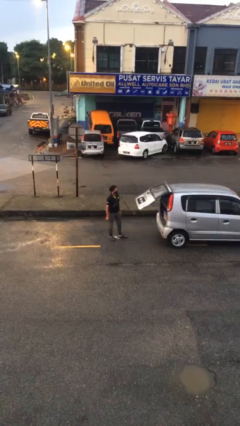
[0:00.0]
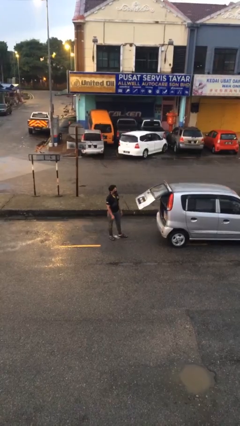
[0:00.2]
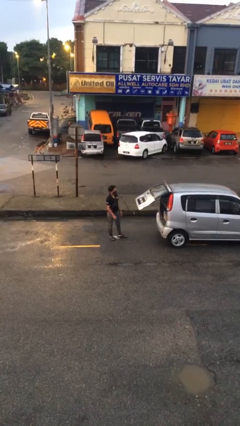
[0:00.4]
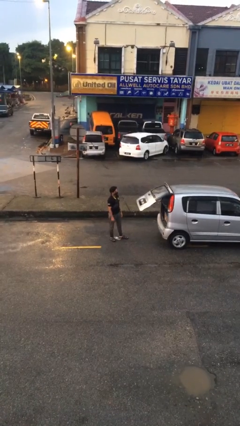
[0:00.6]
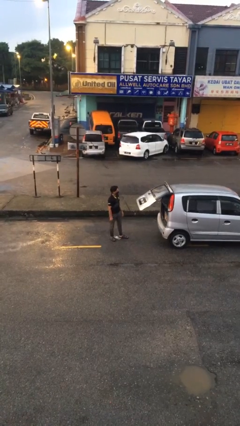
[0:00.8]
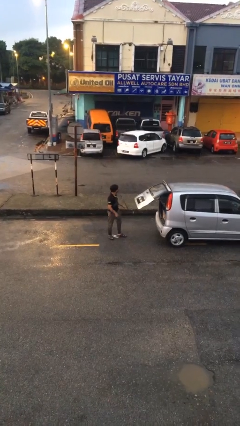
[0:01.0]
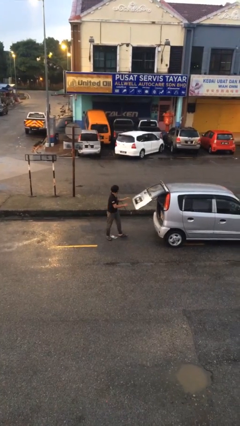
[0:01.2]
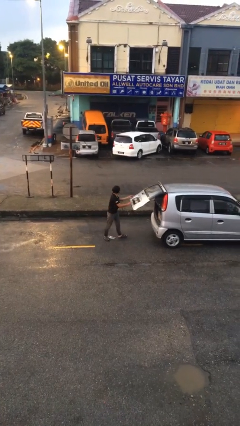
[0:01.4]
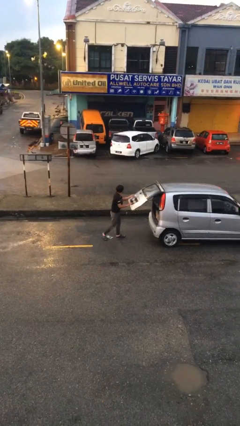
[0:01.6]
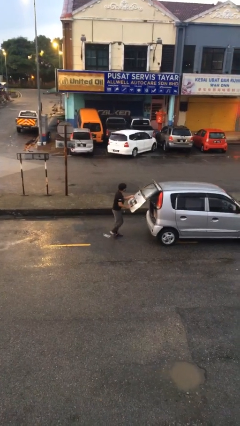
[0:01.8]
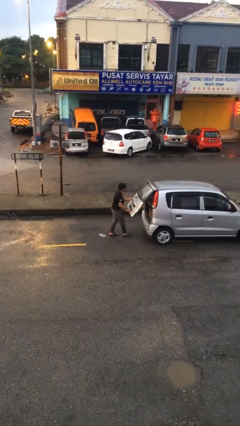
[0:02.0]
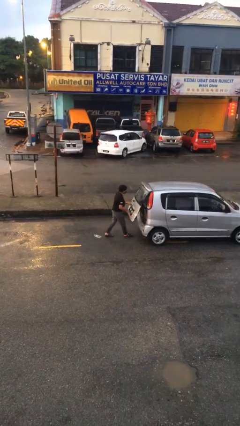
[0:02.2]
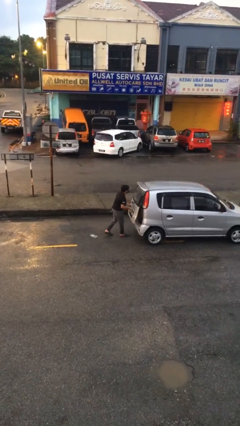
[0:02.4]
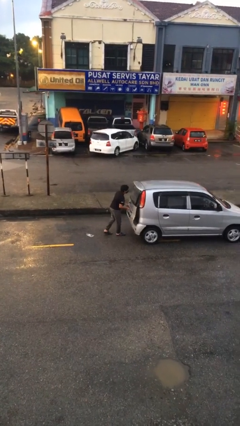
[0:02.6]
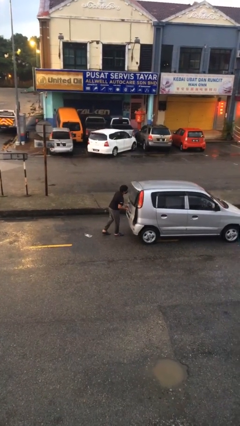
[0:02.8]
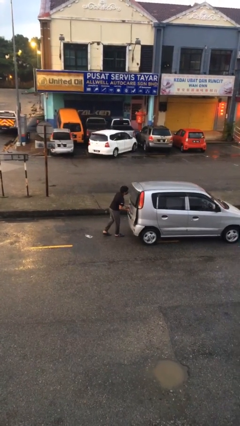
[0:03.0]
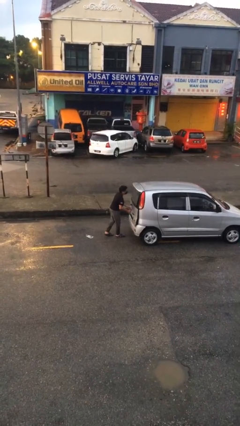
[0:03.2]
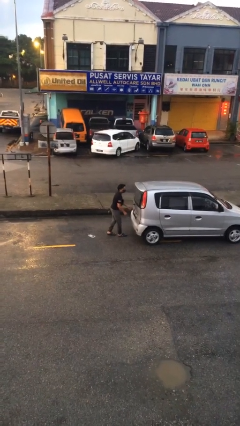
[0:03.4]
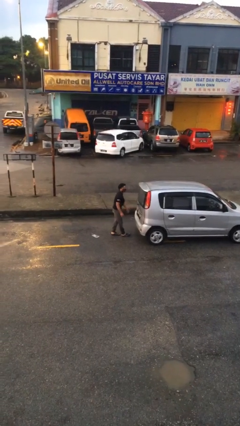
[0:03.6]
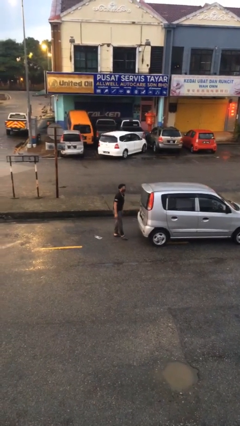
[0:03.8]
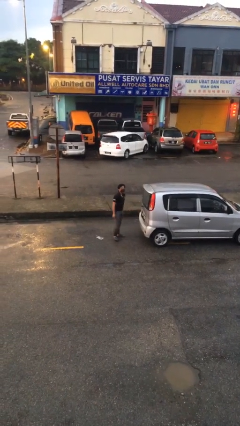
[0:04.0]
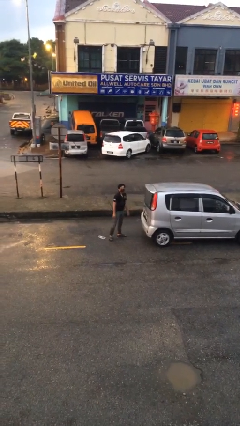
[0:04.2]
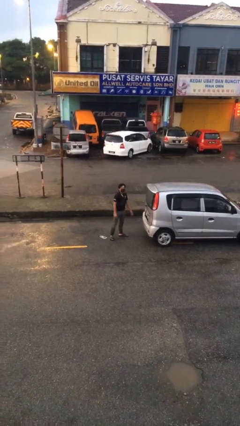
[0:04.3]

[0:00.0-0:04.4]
person closes car trunk

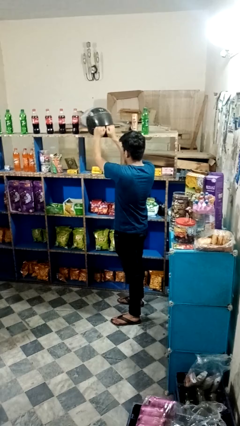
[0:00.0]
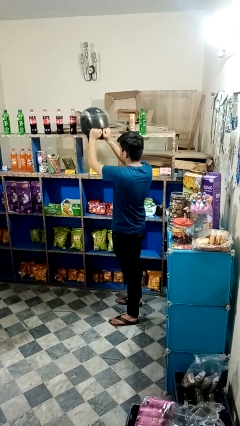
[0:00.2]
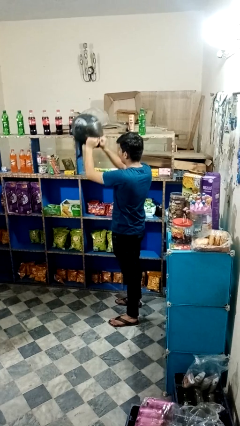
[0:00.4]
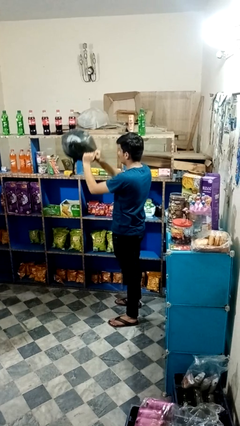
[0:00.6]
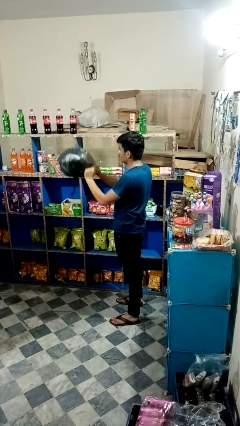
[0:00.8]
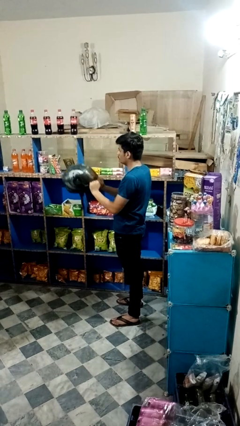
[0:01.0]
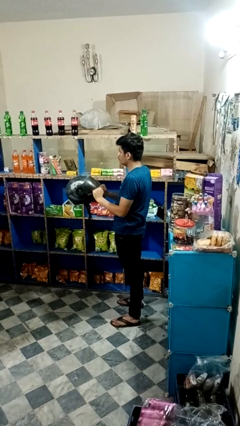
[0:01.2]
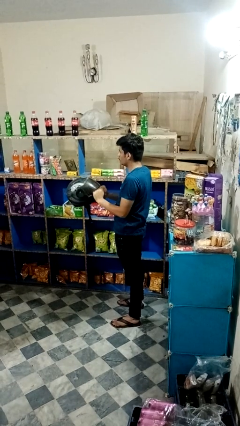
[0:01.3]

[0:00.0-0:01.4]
person puts down object on shelf

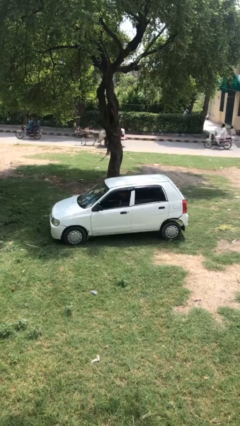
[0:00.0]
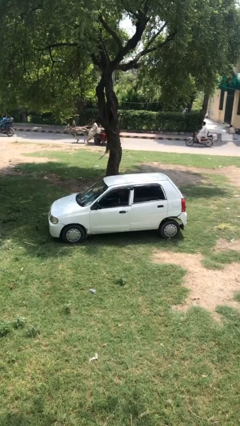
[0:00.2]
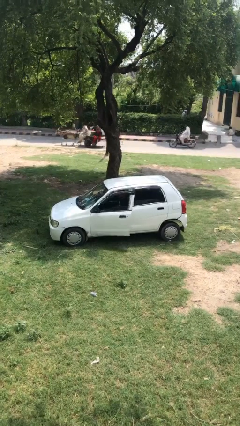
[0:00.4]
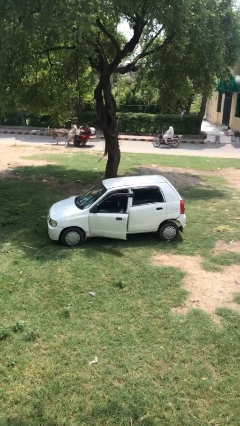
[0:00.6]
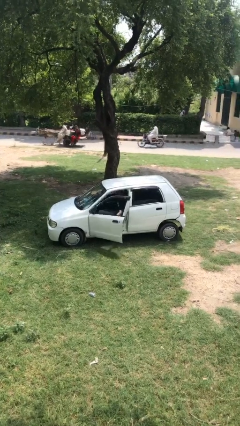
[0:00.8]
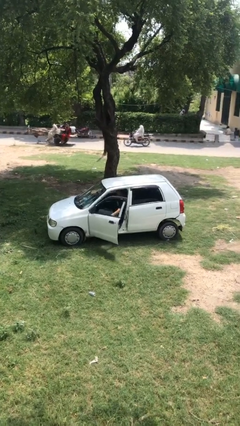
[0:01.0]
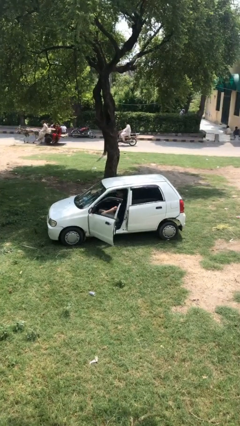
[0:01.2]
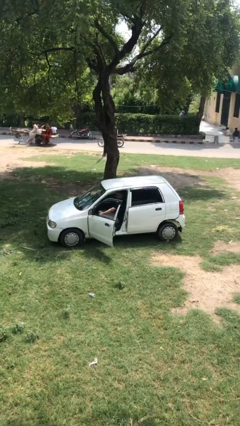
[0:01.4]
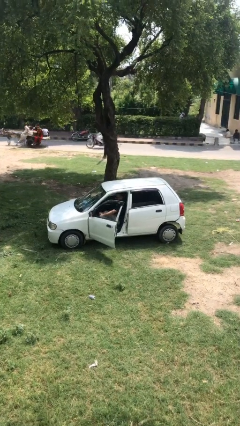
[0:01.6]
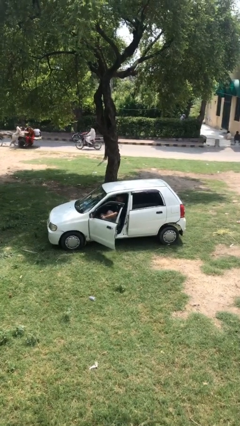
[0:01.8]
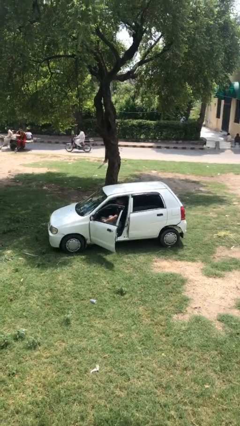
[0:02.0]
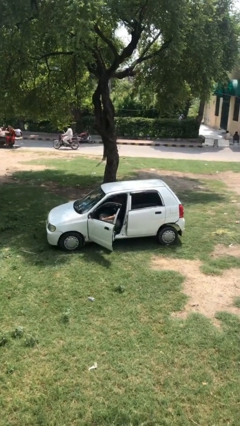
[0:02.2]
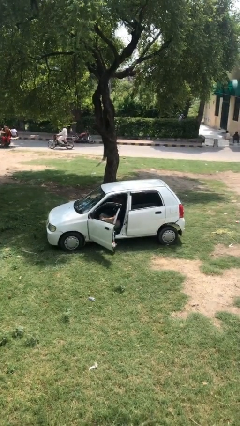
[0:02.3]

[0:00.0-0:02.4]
person opens car door

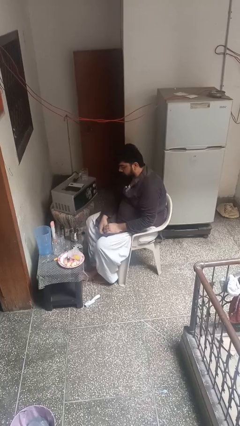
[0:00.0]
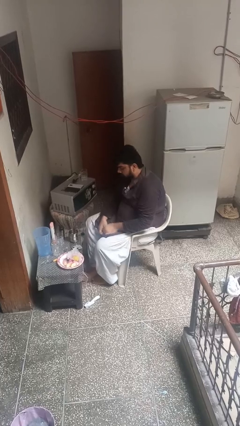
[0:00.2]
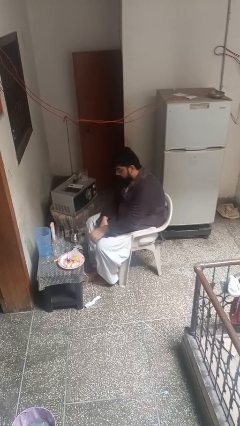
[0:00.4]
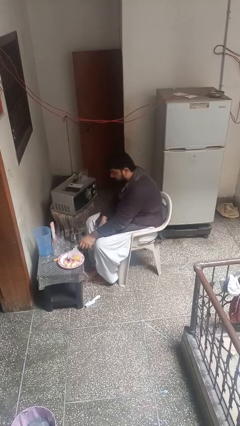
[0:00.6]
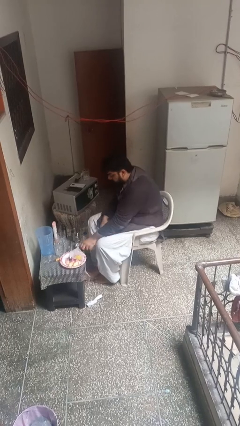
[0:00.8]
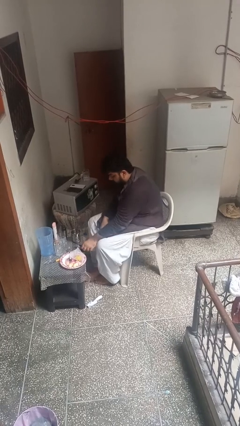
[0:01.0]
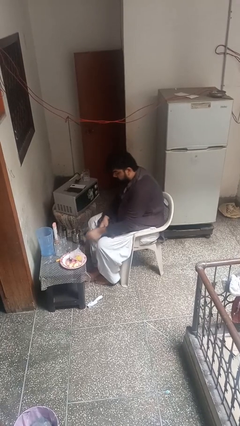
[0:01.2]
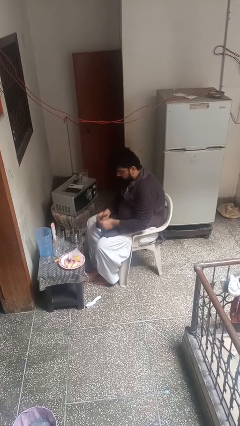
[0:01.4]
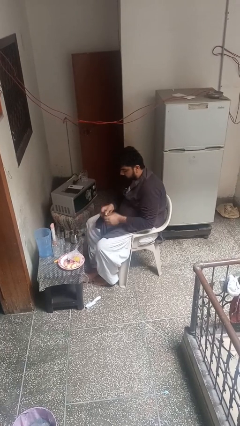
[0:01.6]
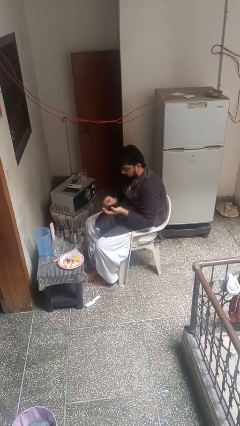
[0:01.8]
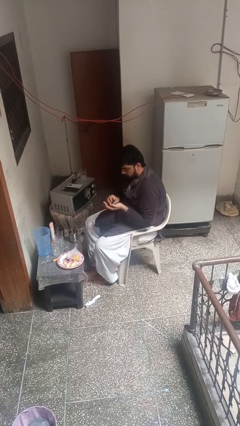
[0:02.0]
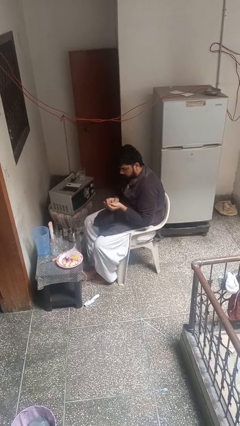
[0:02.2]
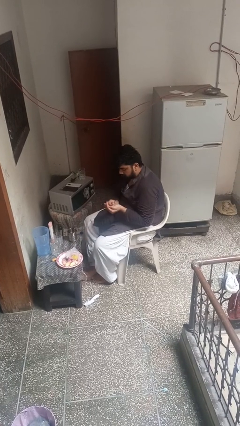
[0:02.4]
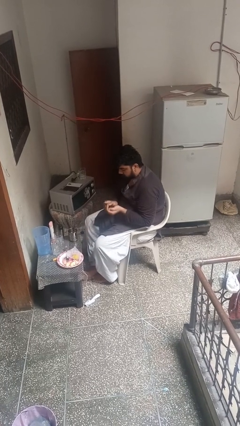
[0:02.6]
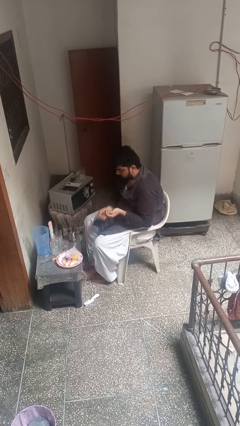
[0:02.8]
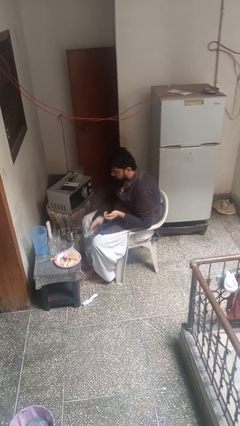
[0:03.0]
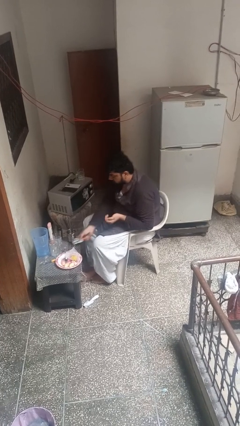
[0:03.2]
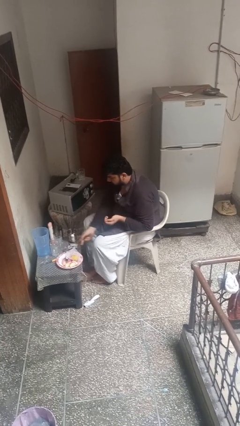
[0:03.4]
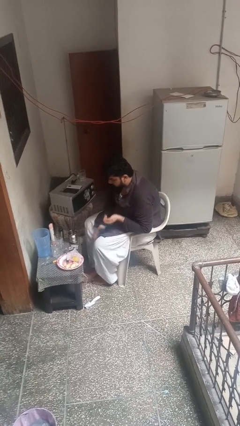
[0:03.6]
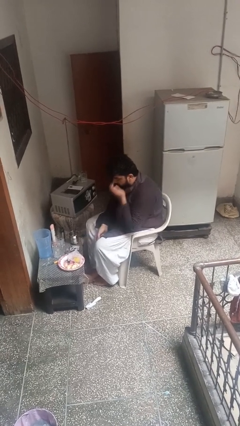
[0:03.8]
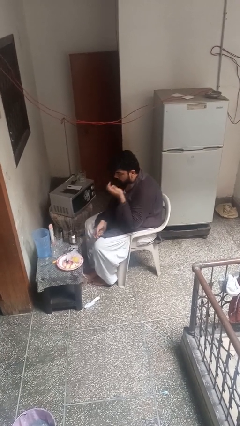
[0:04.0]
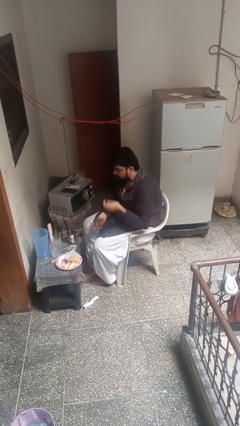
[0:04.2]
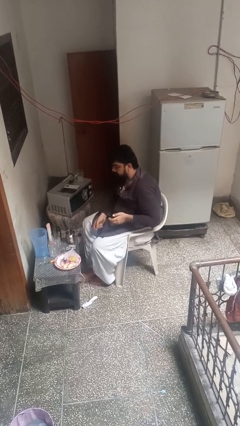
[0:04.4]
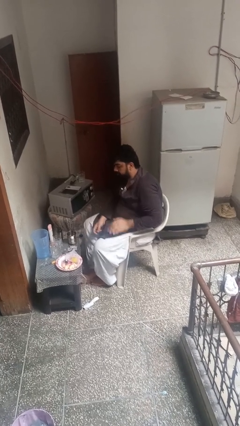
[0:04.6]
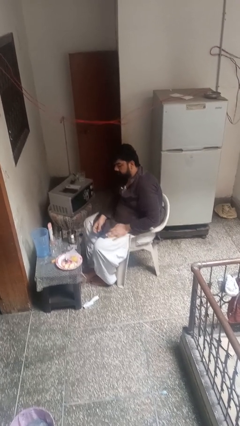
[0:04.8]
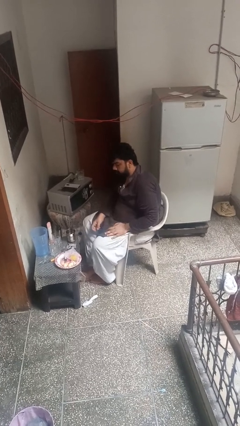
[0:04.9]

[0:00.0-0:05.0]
person takes medicine pills

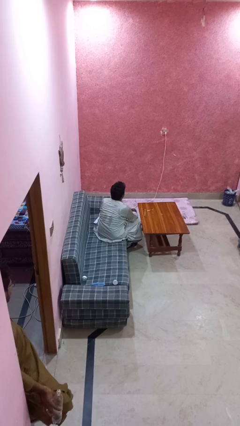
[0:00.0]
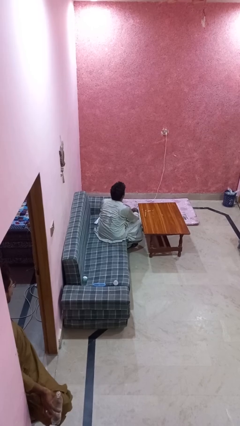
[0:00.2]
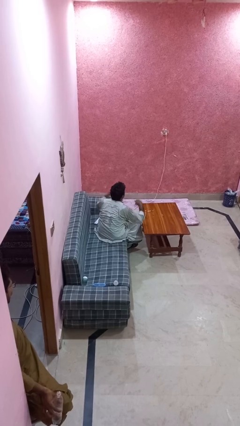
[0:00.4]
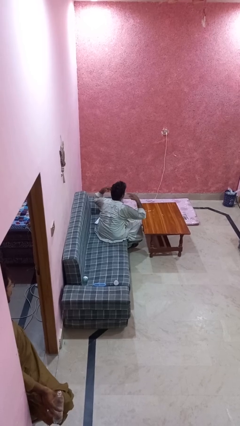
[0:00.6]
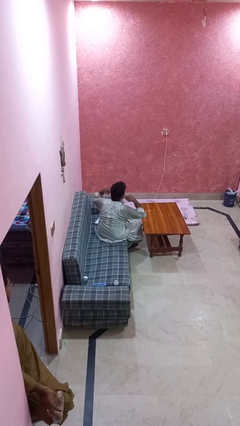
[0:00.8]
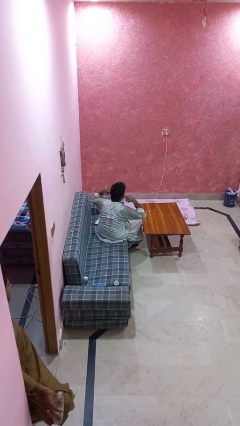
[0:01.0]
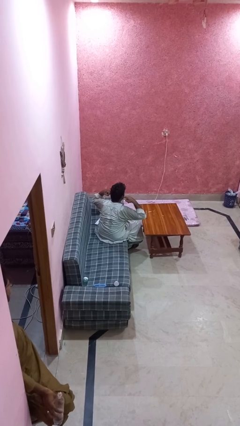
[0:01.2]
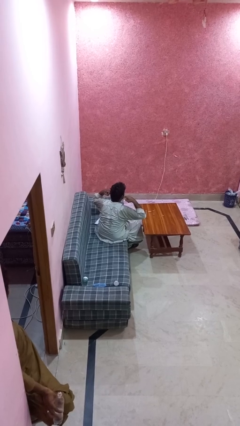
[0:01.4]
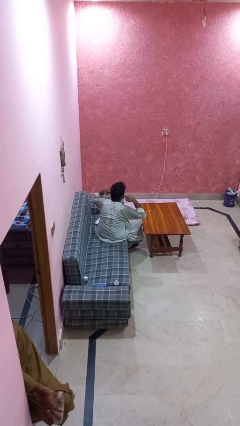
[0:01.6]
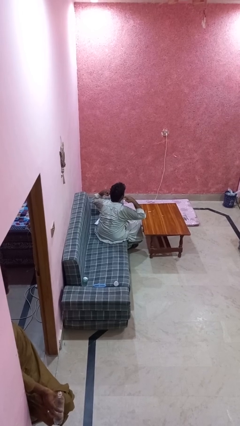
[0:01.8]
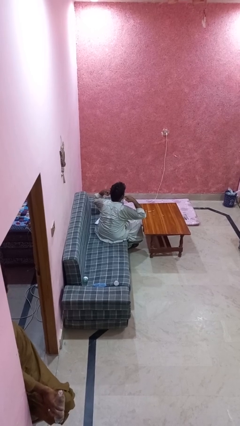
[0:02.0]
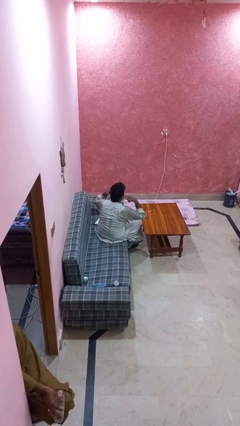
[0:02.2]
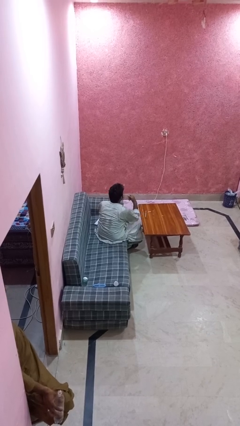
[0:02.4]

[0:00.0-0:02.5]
person puts fingers in ear

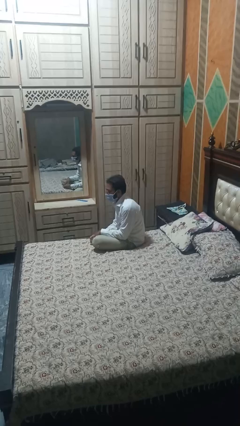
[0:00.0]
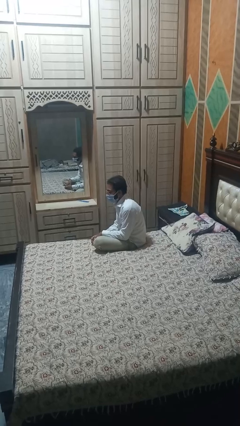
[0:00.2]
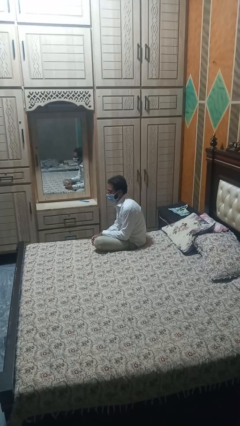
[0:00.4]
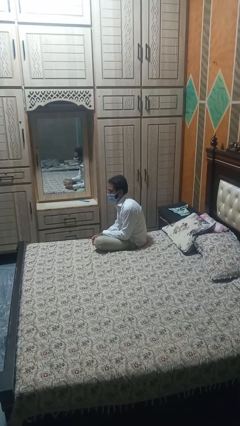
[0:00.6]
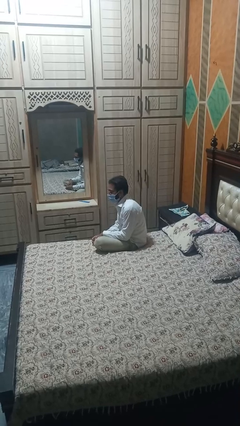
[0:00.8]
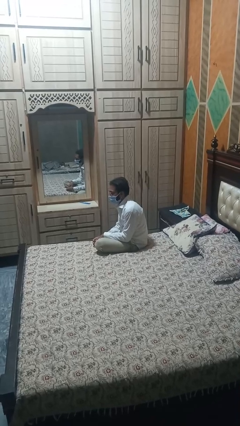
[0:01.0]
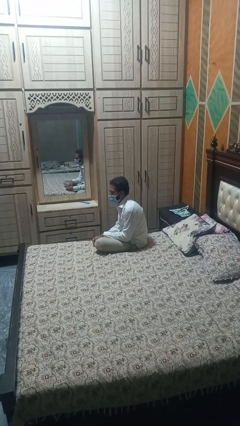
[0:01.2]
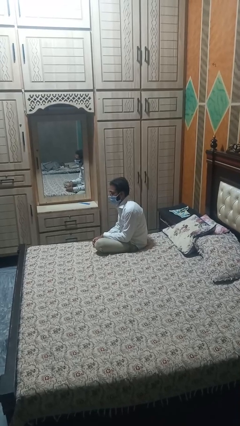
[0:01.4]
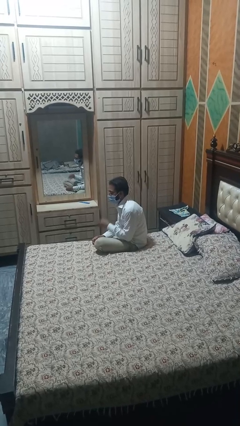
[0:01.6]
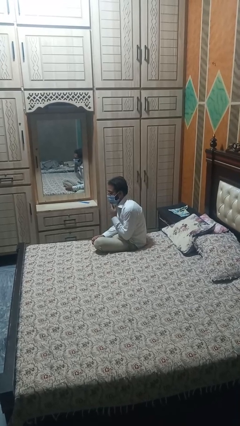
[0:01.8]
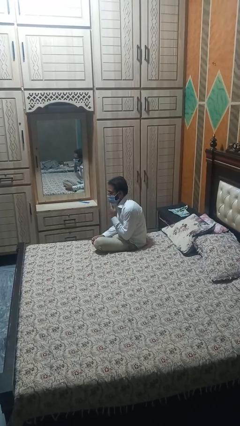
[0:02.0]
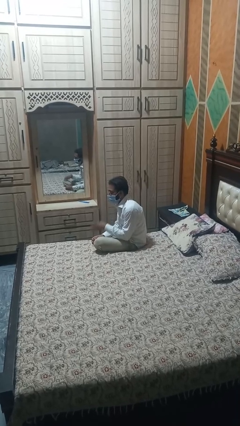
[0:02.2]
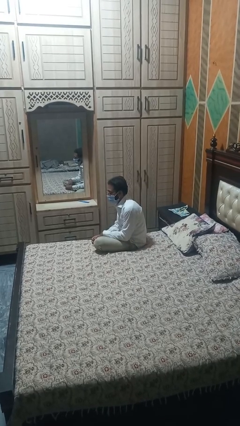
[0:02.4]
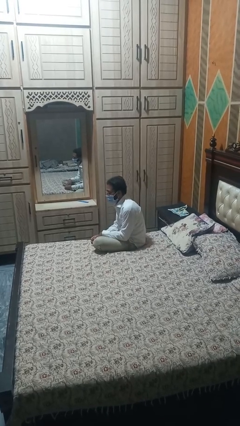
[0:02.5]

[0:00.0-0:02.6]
person strokes chin
